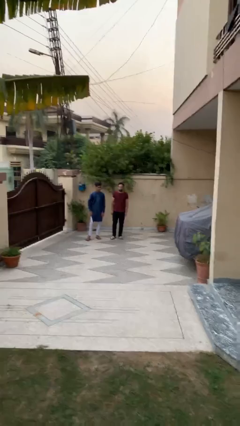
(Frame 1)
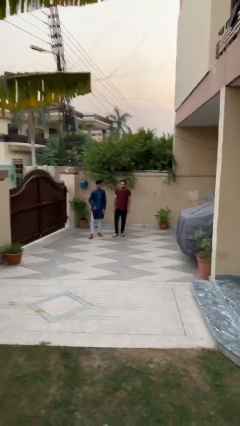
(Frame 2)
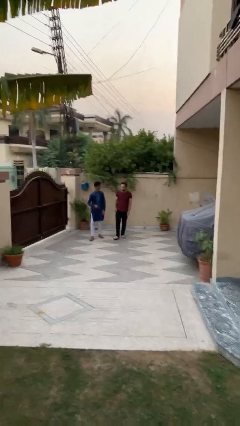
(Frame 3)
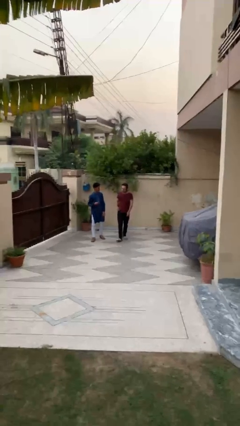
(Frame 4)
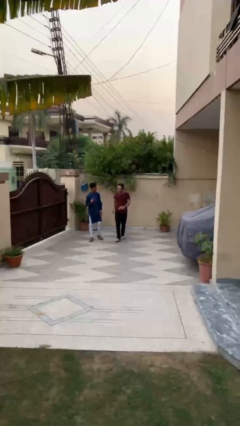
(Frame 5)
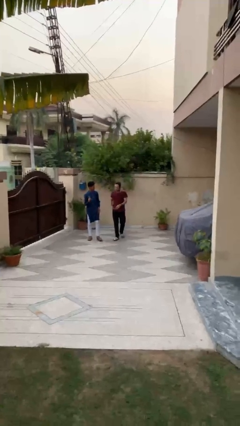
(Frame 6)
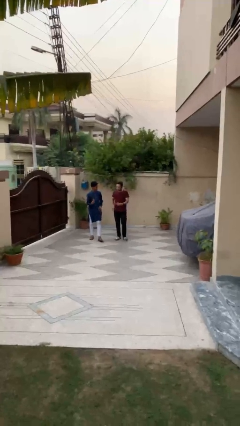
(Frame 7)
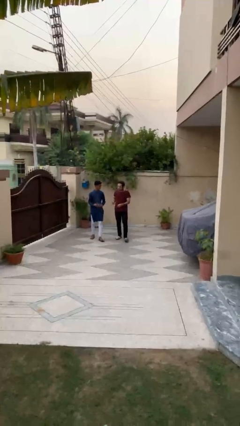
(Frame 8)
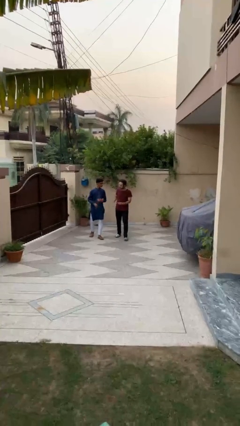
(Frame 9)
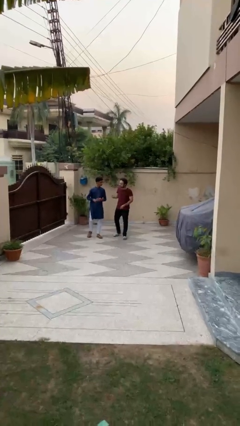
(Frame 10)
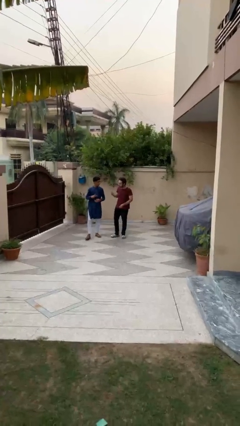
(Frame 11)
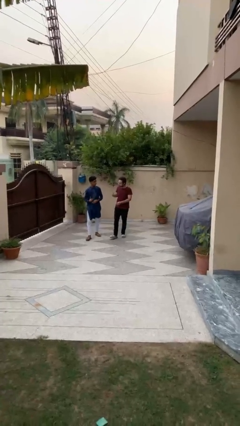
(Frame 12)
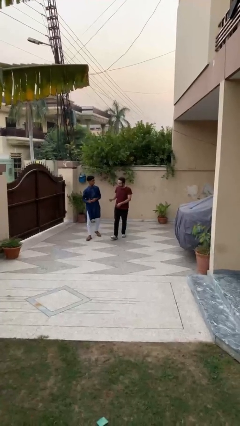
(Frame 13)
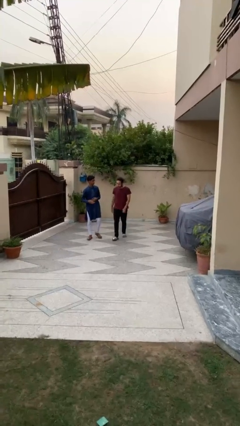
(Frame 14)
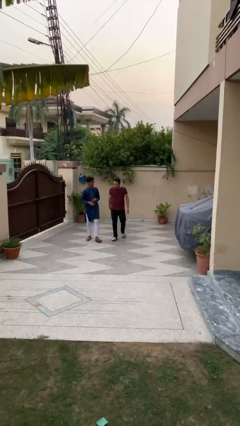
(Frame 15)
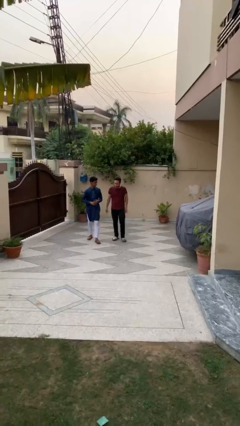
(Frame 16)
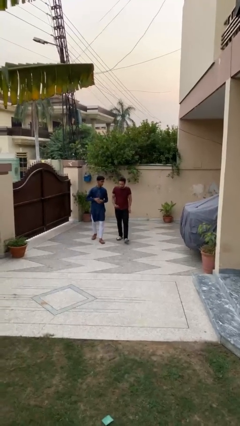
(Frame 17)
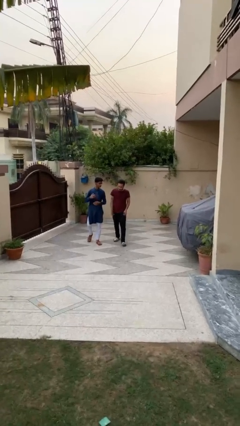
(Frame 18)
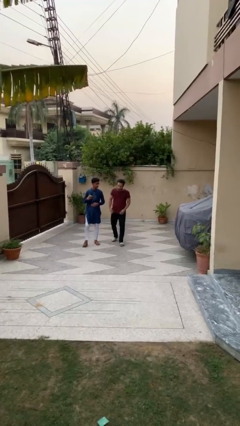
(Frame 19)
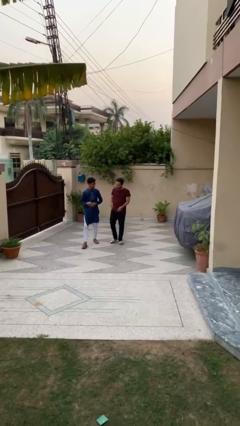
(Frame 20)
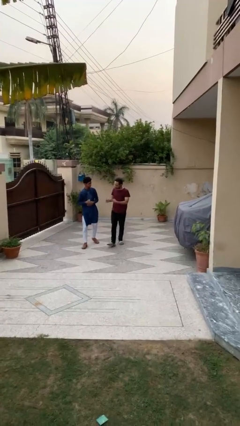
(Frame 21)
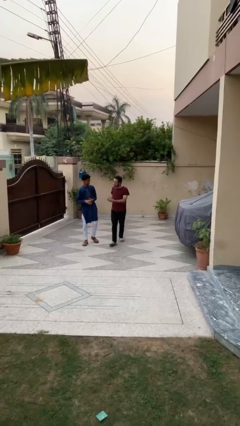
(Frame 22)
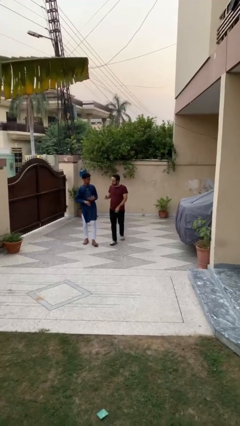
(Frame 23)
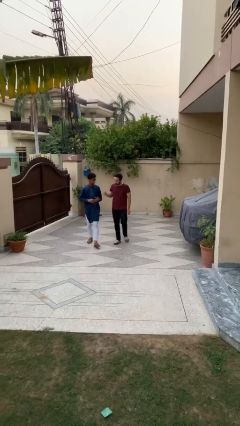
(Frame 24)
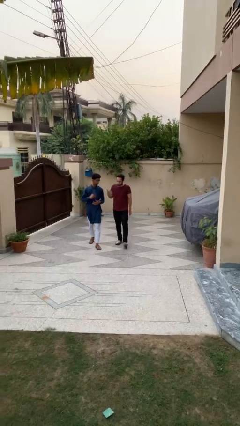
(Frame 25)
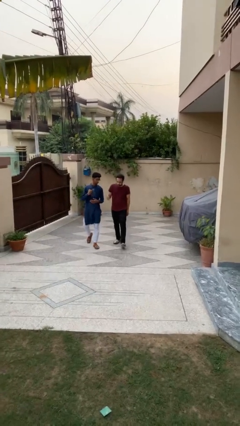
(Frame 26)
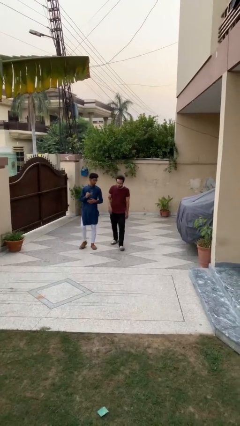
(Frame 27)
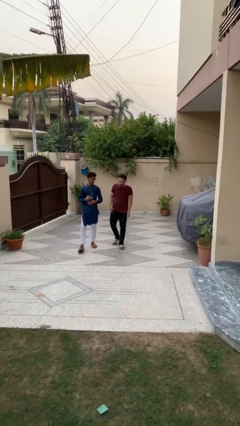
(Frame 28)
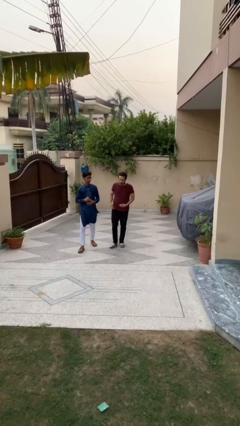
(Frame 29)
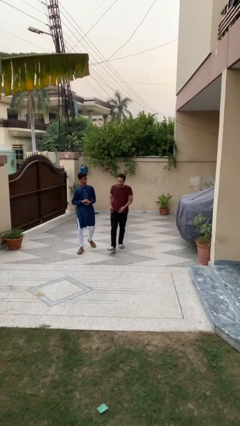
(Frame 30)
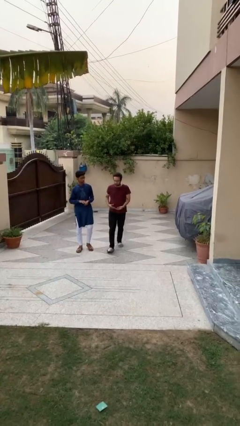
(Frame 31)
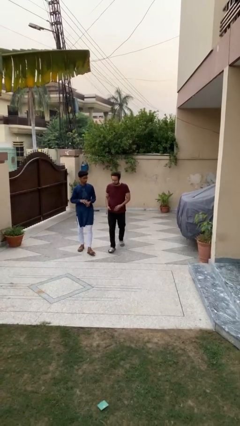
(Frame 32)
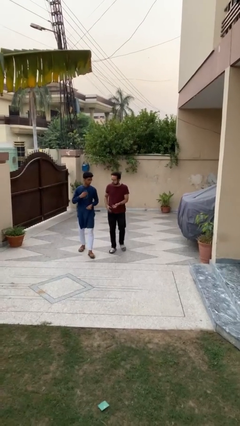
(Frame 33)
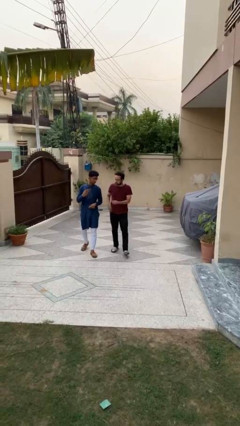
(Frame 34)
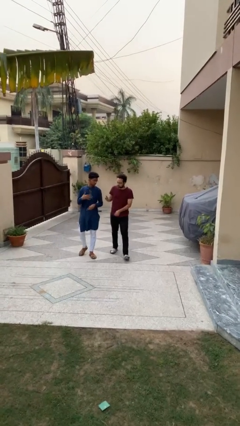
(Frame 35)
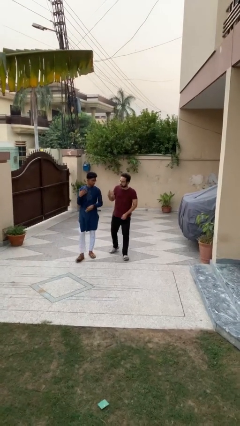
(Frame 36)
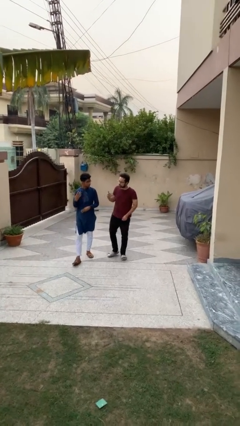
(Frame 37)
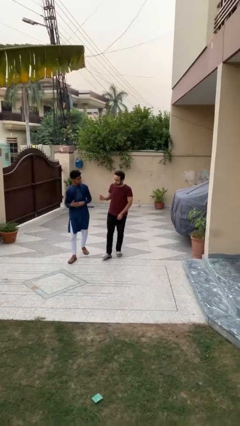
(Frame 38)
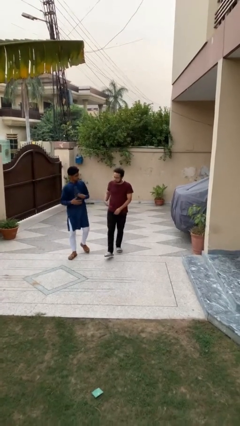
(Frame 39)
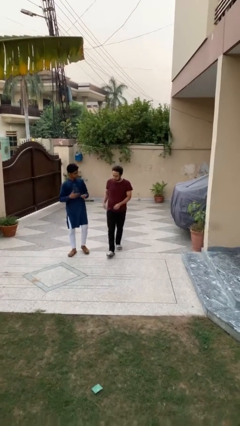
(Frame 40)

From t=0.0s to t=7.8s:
person talks to person

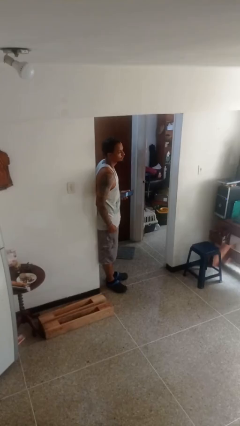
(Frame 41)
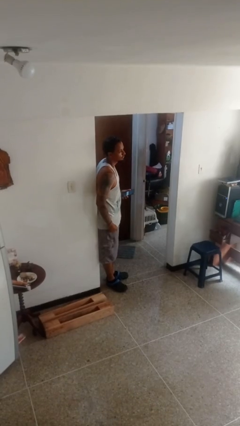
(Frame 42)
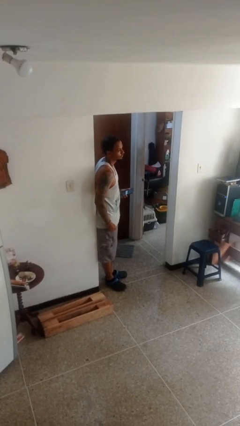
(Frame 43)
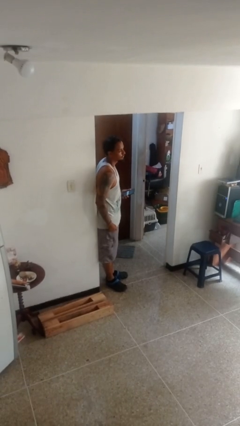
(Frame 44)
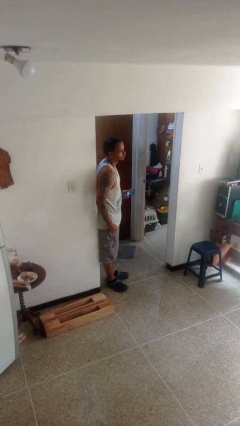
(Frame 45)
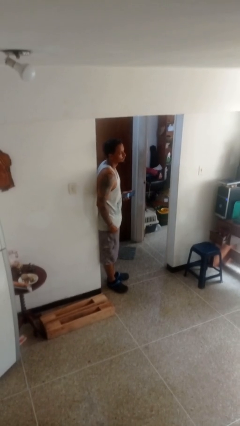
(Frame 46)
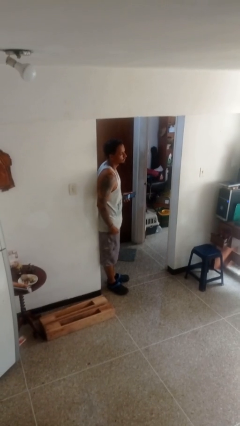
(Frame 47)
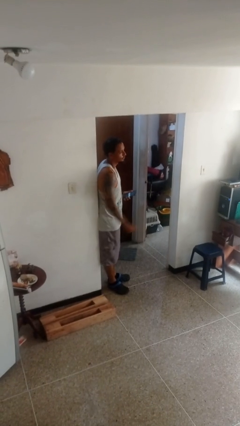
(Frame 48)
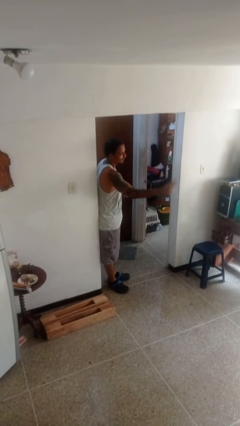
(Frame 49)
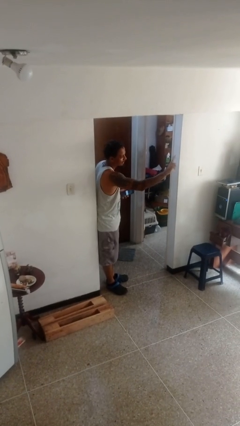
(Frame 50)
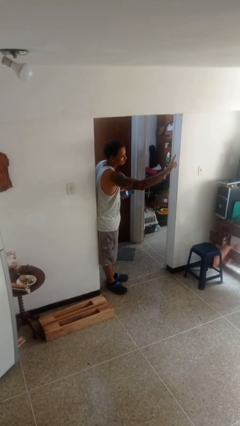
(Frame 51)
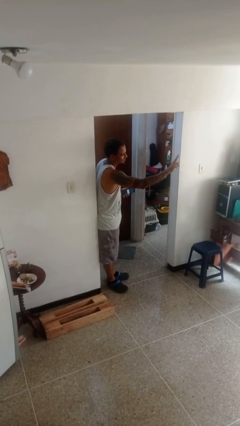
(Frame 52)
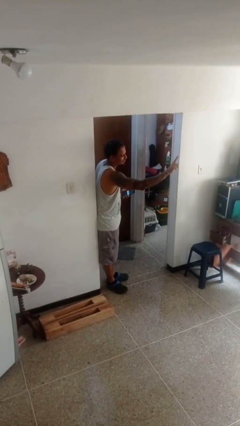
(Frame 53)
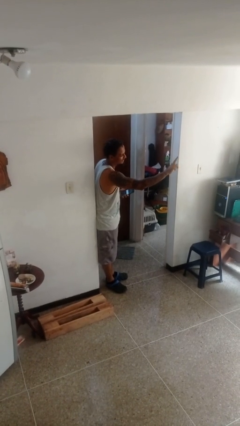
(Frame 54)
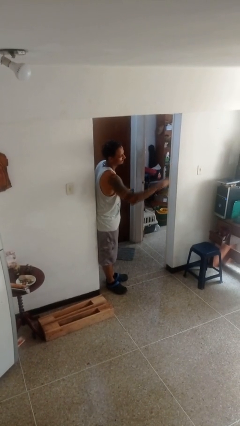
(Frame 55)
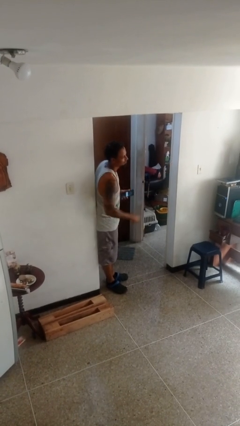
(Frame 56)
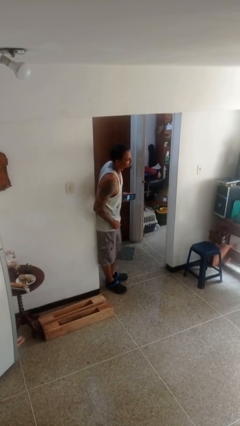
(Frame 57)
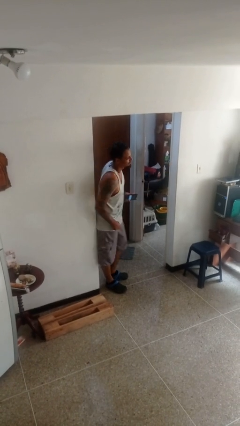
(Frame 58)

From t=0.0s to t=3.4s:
person gestures peace

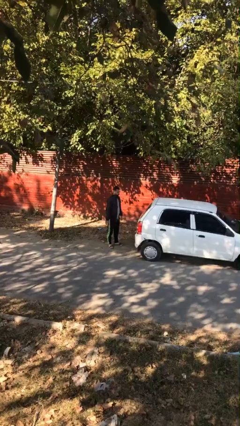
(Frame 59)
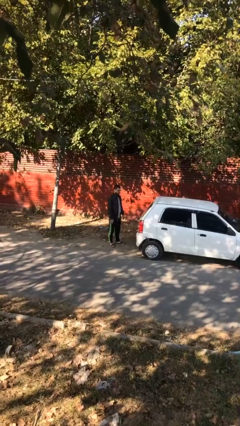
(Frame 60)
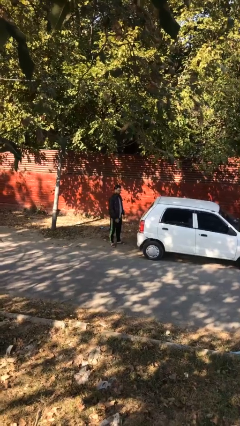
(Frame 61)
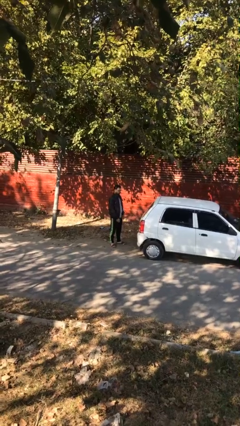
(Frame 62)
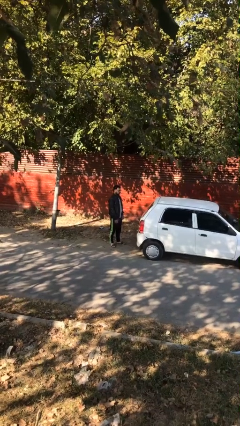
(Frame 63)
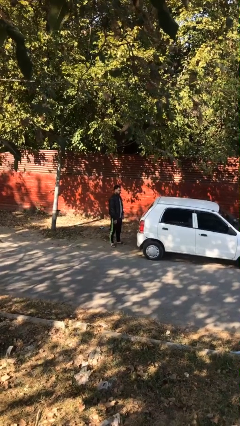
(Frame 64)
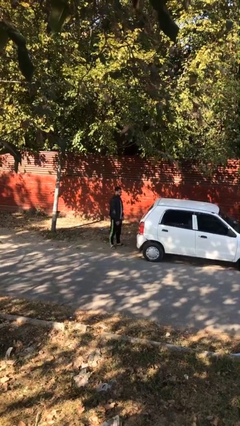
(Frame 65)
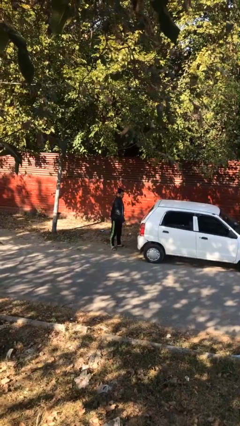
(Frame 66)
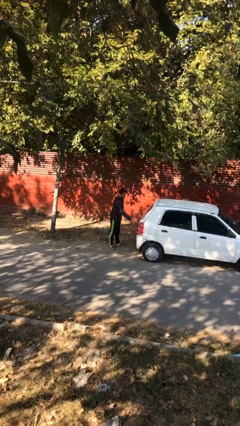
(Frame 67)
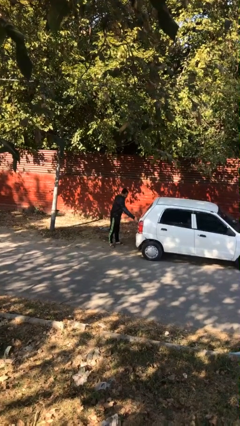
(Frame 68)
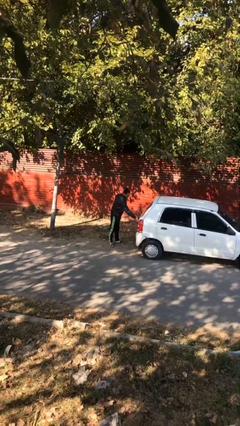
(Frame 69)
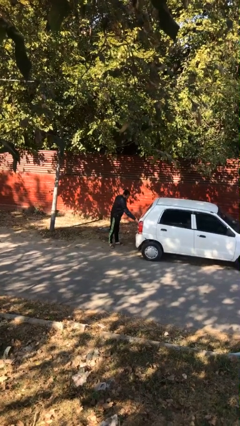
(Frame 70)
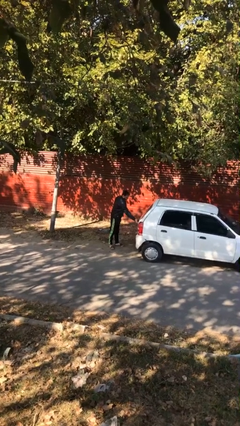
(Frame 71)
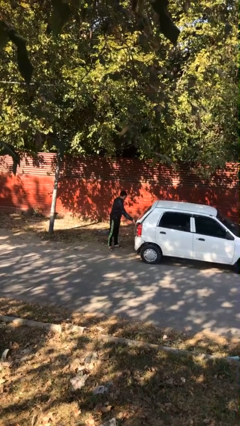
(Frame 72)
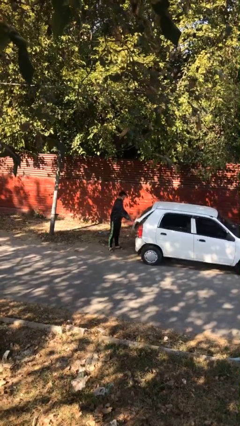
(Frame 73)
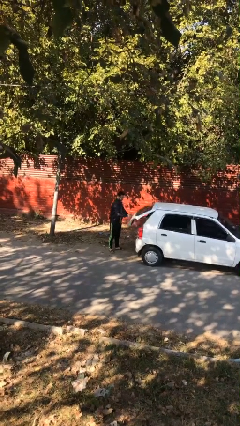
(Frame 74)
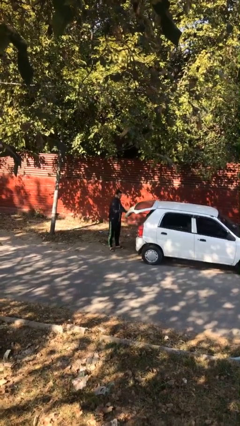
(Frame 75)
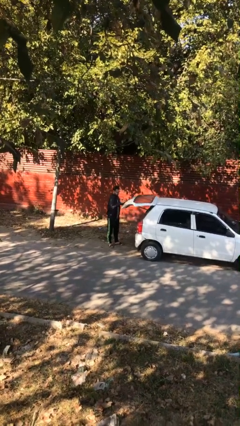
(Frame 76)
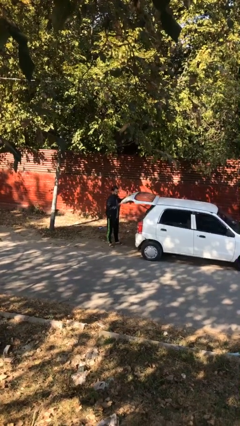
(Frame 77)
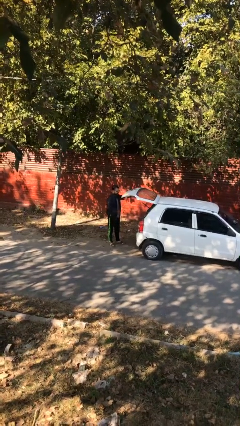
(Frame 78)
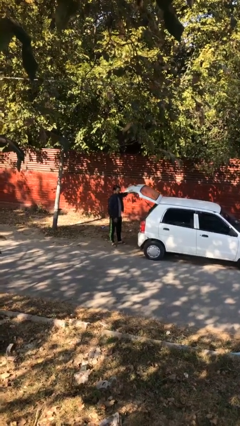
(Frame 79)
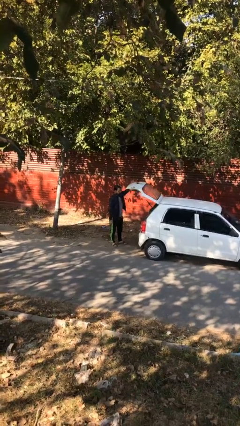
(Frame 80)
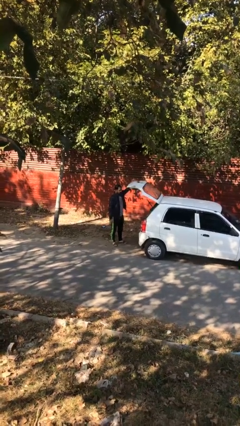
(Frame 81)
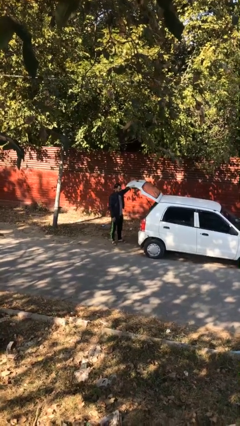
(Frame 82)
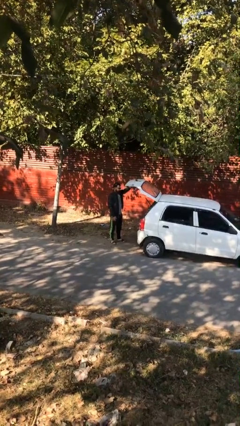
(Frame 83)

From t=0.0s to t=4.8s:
person opens car trunk

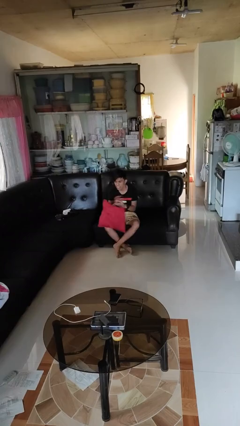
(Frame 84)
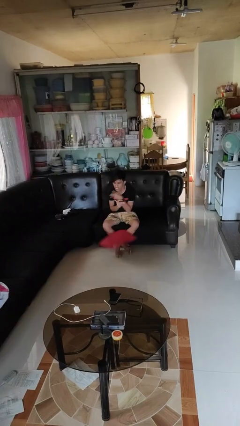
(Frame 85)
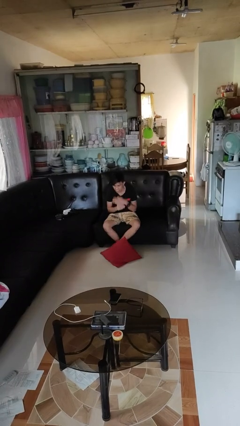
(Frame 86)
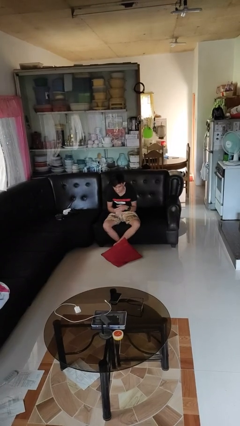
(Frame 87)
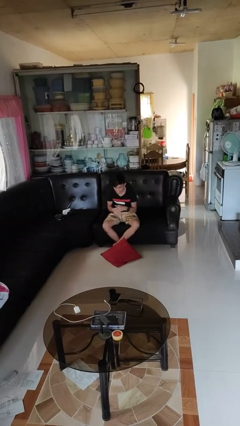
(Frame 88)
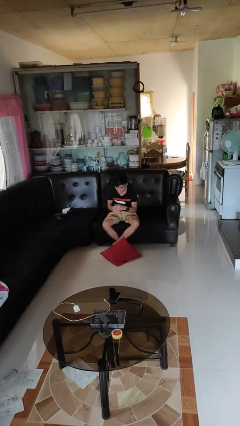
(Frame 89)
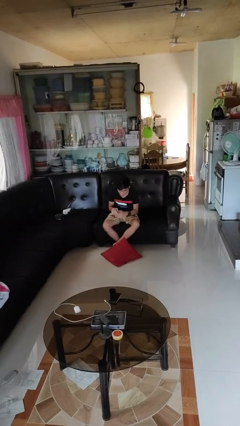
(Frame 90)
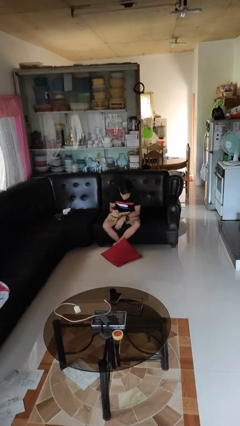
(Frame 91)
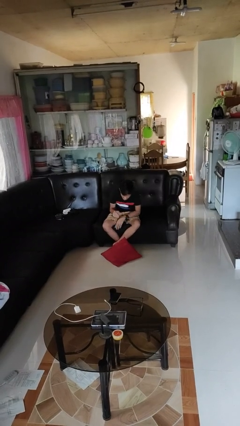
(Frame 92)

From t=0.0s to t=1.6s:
person drops object
